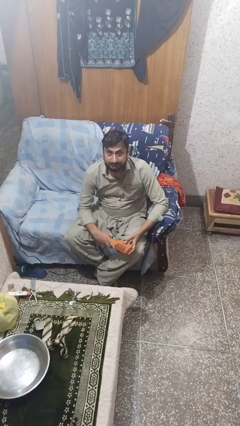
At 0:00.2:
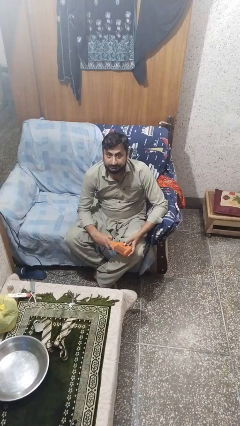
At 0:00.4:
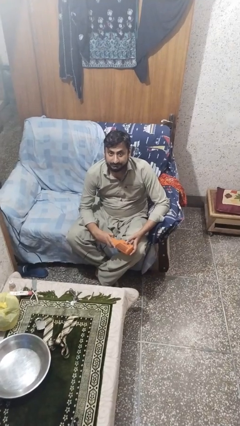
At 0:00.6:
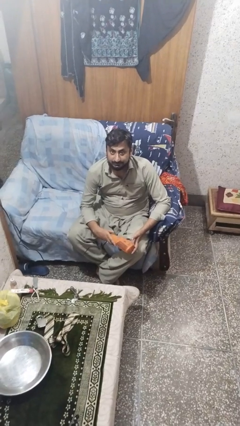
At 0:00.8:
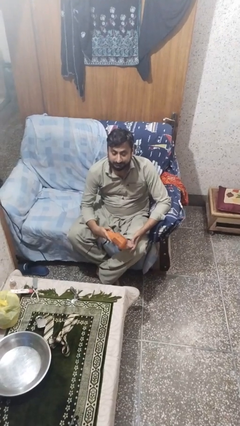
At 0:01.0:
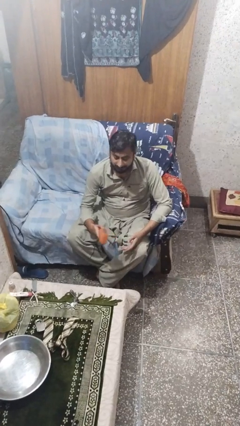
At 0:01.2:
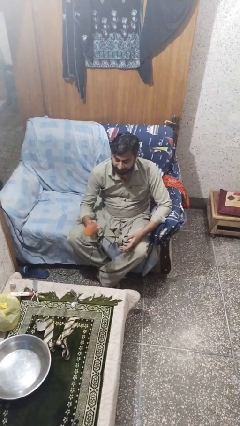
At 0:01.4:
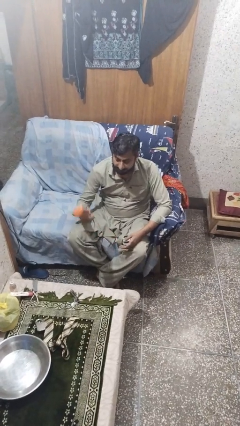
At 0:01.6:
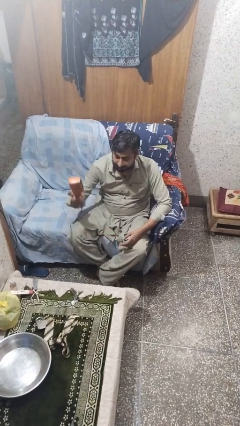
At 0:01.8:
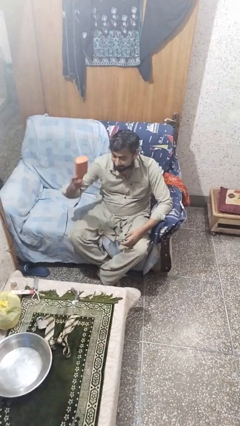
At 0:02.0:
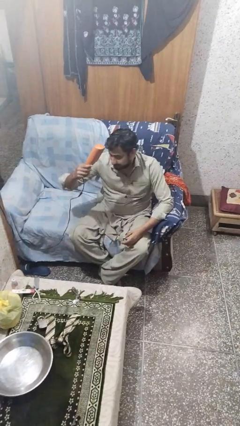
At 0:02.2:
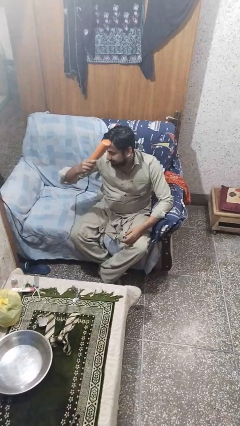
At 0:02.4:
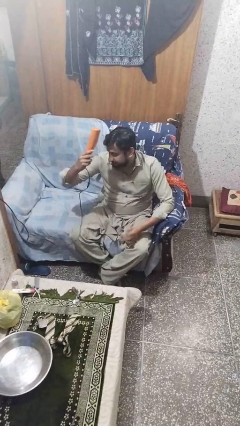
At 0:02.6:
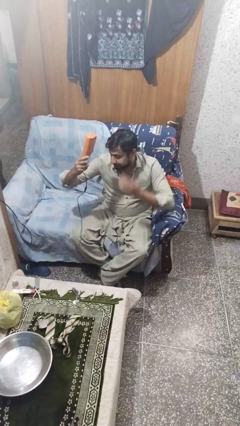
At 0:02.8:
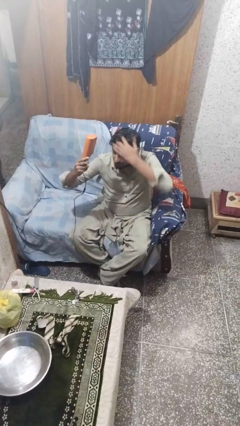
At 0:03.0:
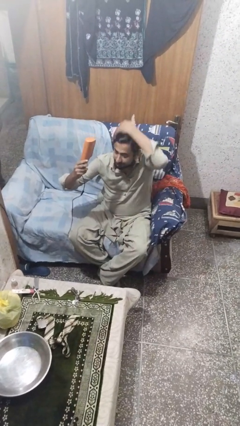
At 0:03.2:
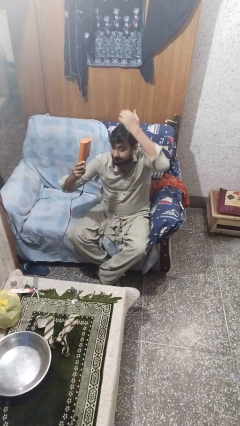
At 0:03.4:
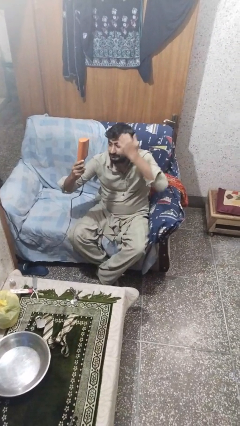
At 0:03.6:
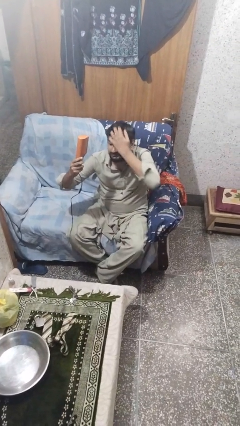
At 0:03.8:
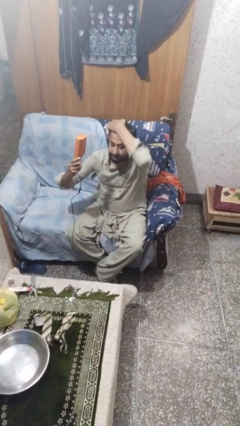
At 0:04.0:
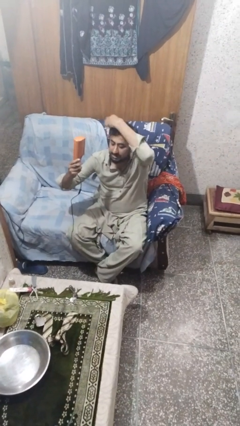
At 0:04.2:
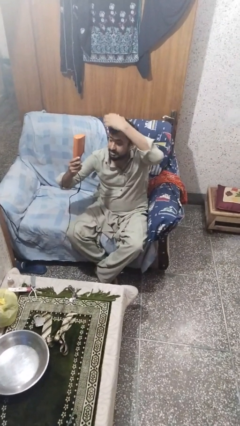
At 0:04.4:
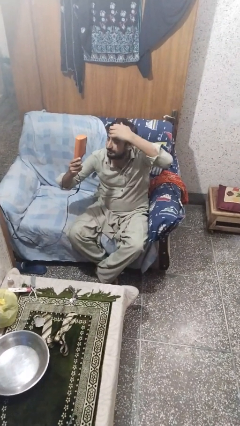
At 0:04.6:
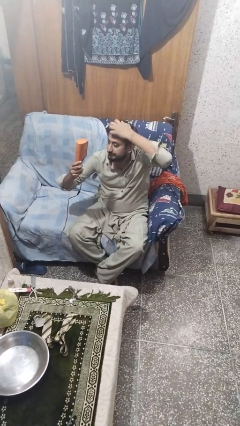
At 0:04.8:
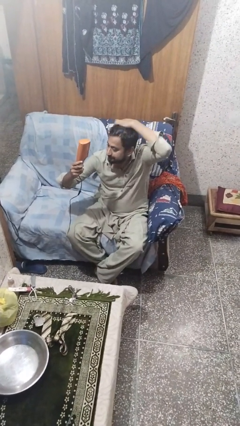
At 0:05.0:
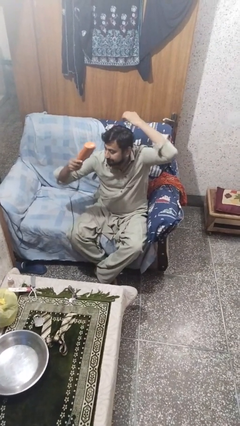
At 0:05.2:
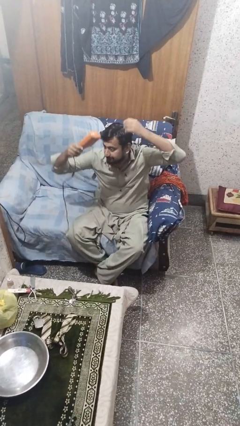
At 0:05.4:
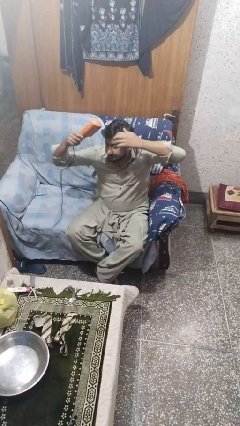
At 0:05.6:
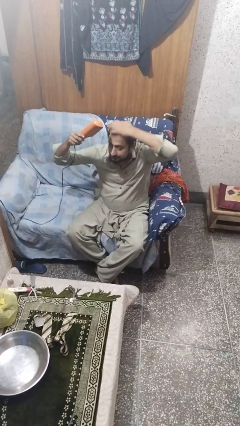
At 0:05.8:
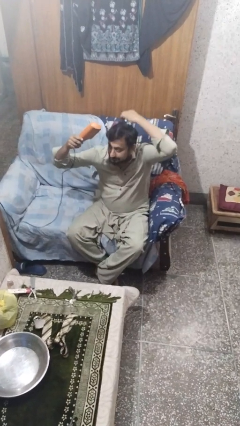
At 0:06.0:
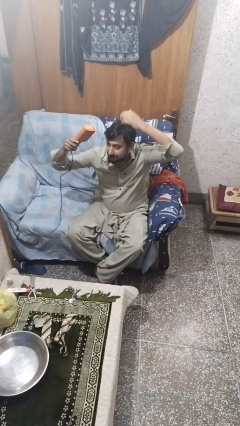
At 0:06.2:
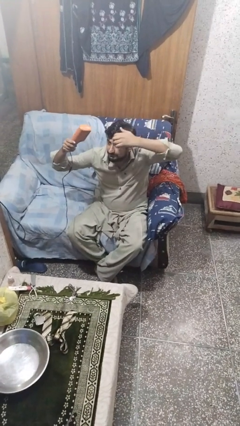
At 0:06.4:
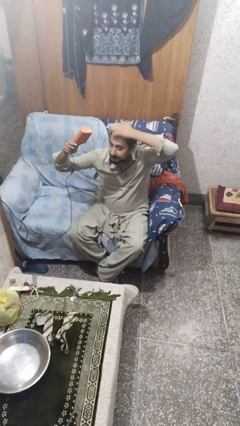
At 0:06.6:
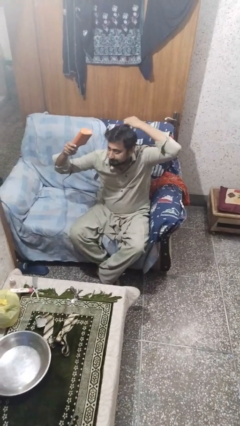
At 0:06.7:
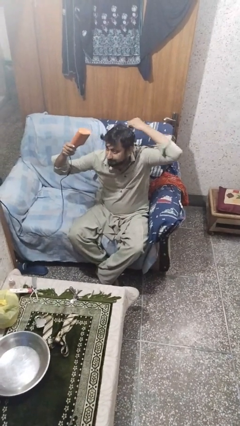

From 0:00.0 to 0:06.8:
person dries hair with hairdryer

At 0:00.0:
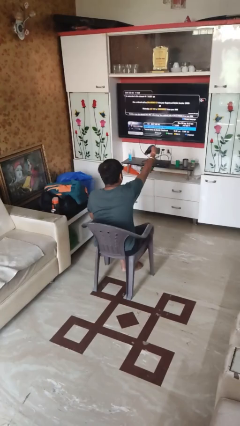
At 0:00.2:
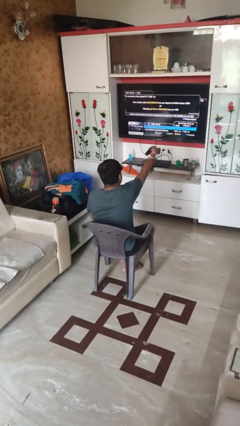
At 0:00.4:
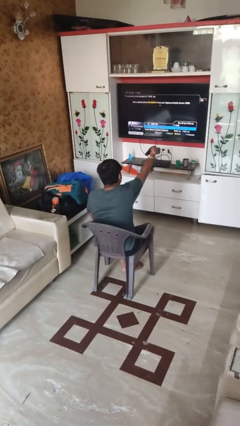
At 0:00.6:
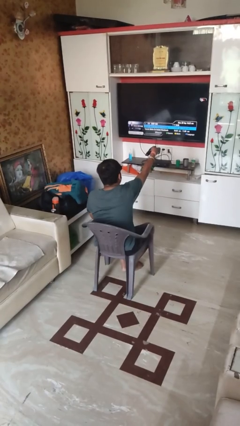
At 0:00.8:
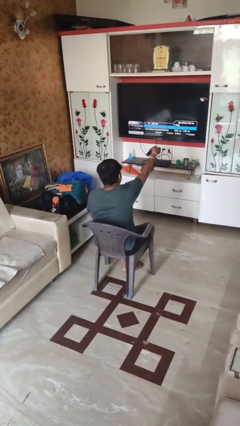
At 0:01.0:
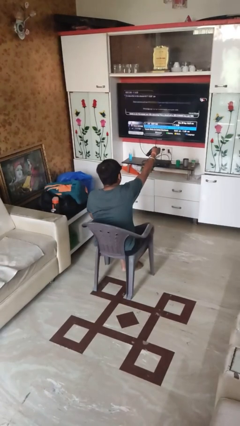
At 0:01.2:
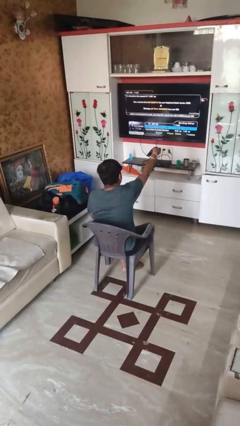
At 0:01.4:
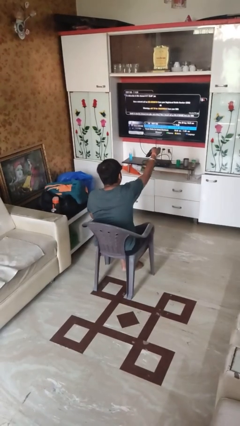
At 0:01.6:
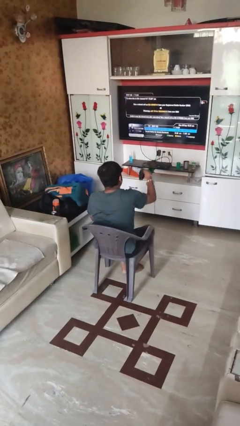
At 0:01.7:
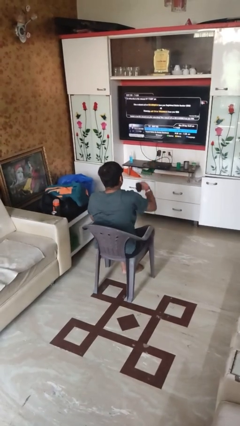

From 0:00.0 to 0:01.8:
person uses television remote

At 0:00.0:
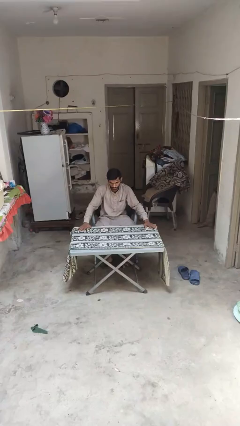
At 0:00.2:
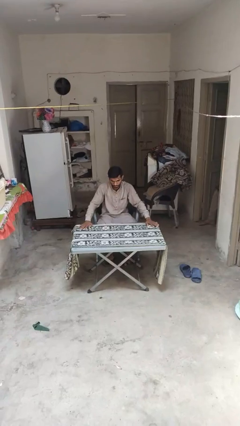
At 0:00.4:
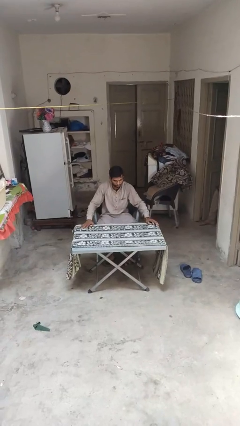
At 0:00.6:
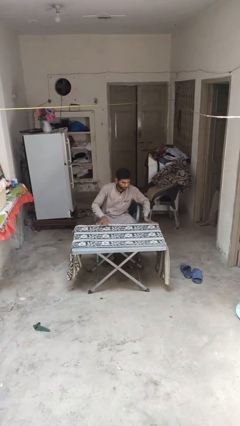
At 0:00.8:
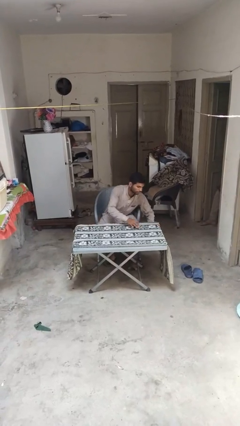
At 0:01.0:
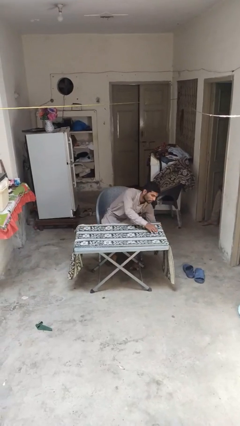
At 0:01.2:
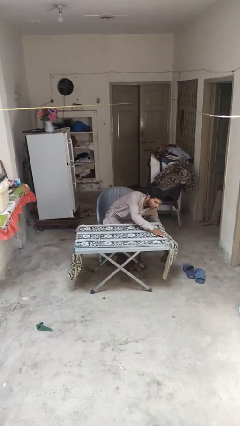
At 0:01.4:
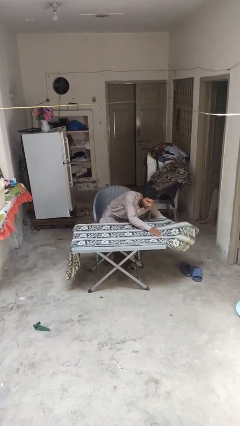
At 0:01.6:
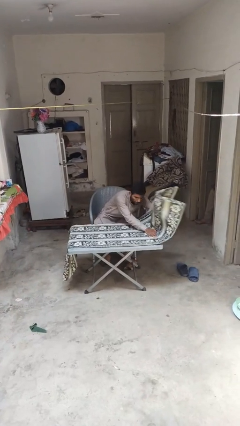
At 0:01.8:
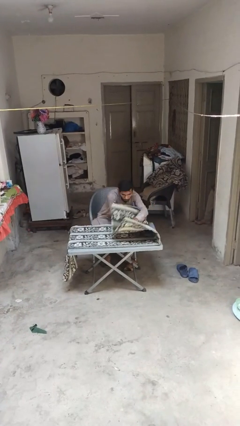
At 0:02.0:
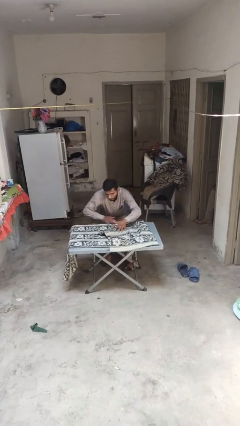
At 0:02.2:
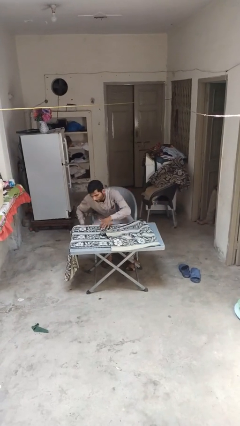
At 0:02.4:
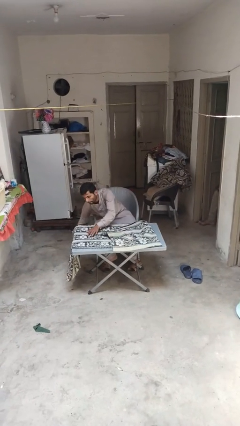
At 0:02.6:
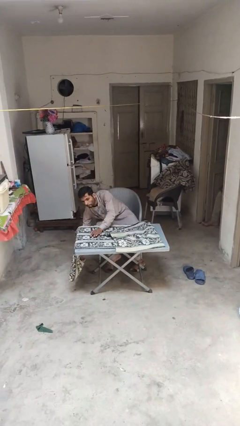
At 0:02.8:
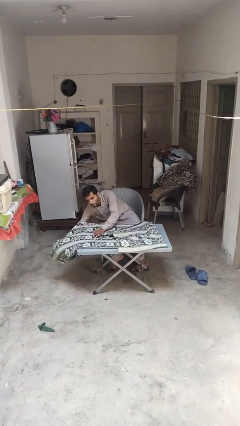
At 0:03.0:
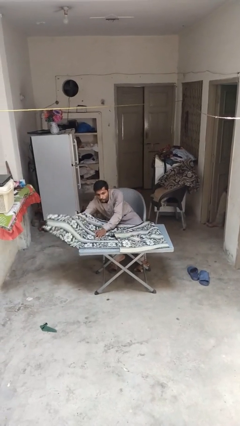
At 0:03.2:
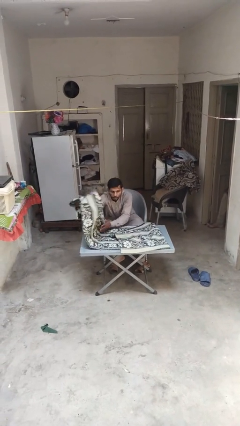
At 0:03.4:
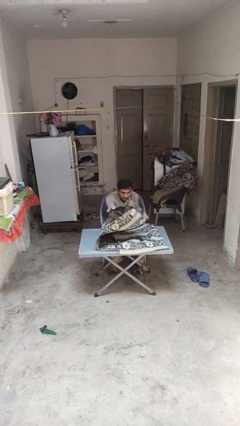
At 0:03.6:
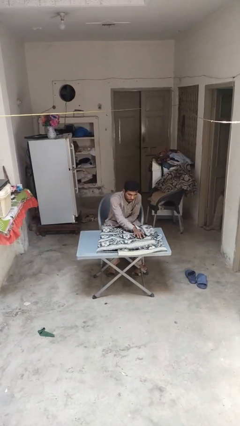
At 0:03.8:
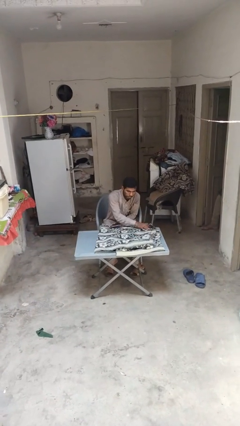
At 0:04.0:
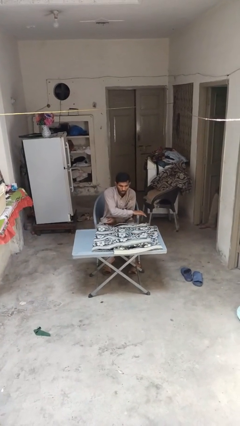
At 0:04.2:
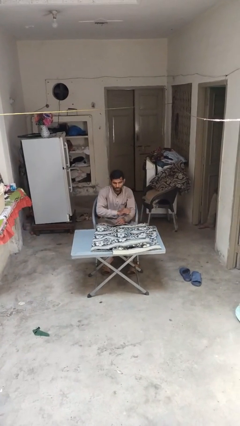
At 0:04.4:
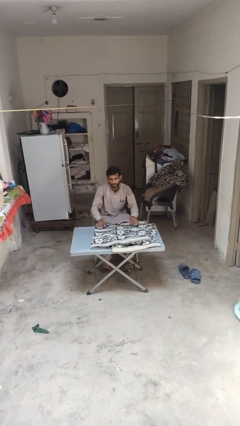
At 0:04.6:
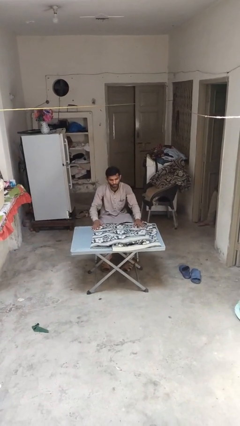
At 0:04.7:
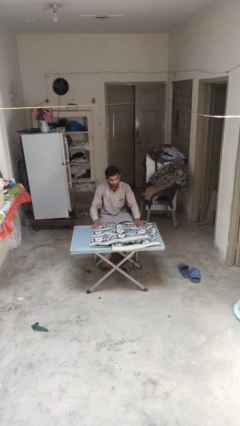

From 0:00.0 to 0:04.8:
person folds tablecloth

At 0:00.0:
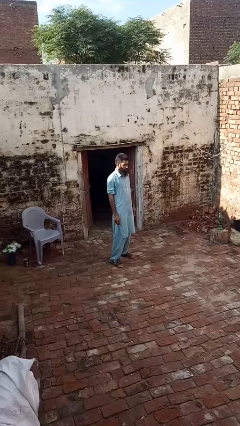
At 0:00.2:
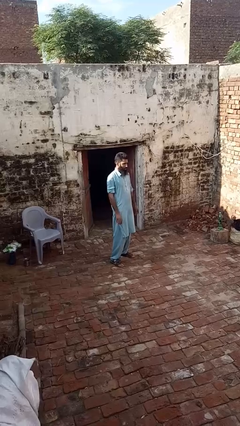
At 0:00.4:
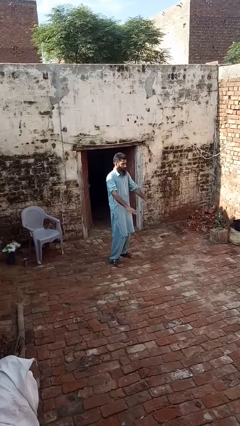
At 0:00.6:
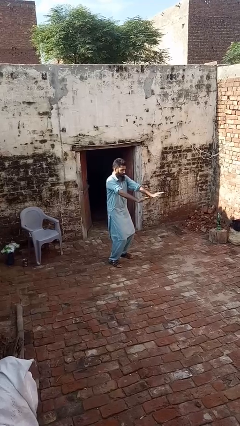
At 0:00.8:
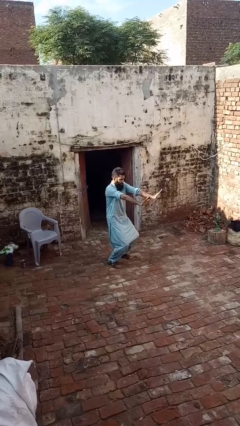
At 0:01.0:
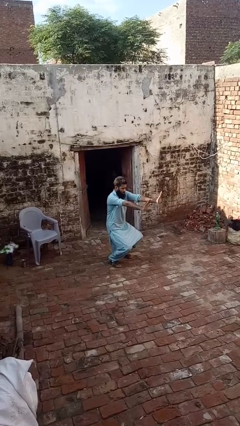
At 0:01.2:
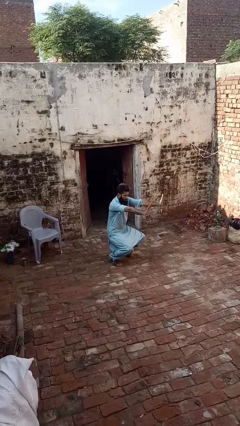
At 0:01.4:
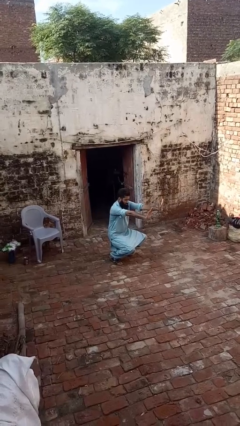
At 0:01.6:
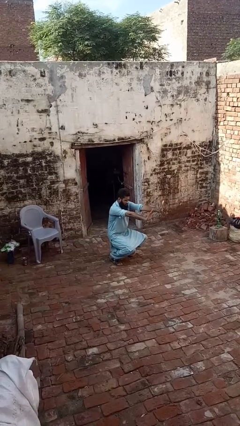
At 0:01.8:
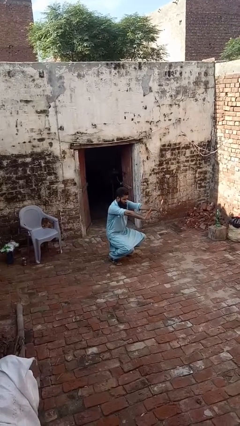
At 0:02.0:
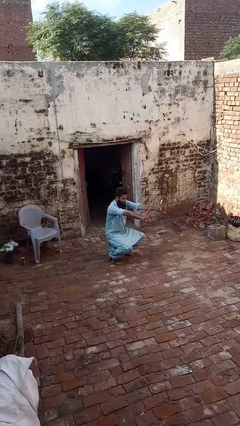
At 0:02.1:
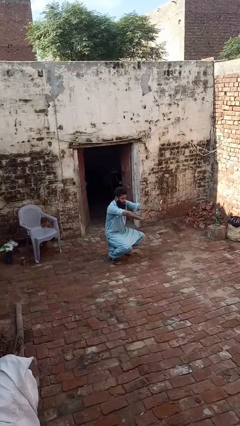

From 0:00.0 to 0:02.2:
person squats

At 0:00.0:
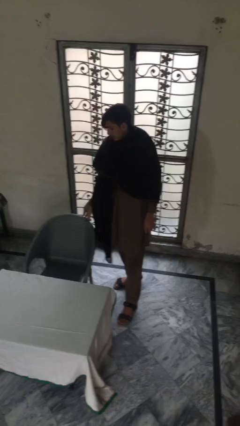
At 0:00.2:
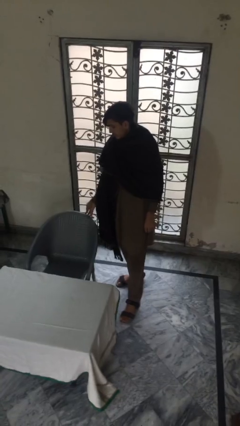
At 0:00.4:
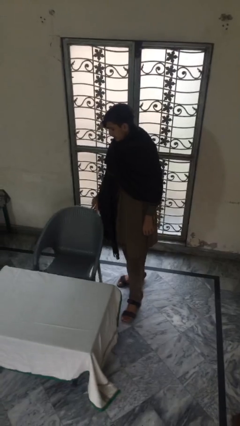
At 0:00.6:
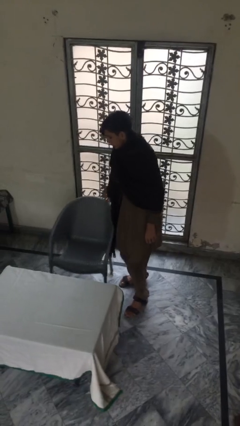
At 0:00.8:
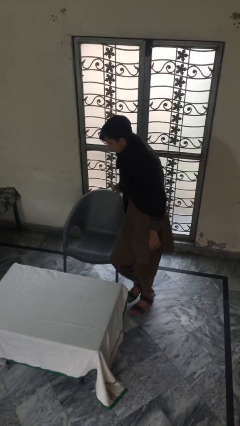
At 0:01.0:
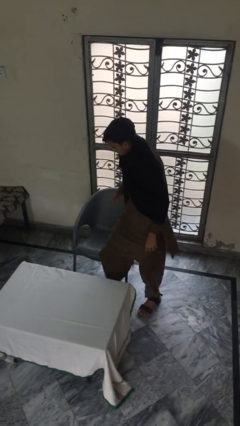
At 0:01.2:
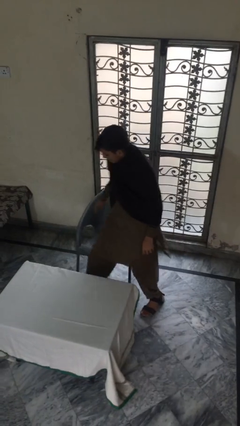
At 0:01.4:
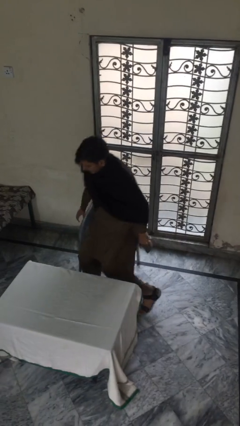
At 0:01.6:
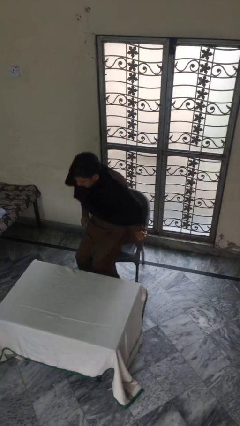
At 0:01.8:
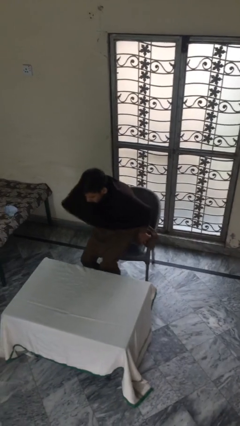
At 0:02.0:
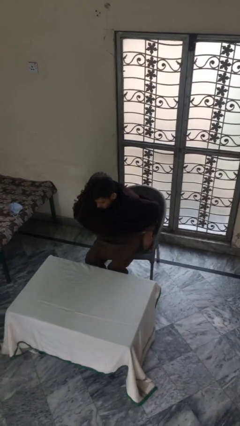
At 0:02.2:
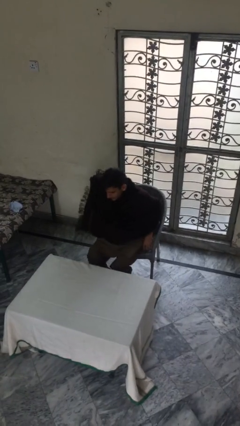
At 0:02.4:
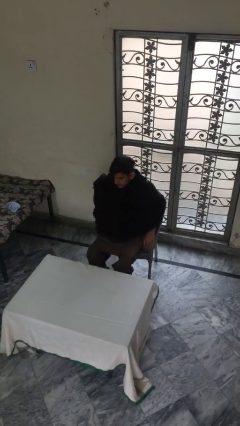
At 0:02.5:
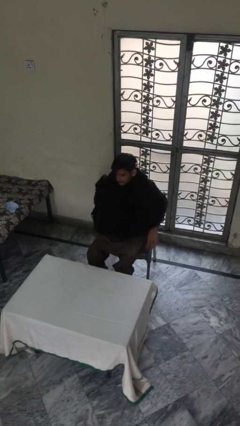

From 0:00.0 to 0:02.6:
person sits down
